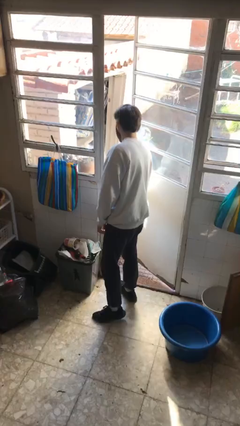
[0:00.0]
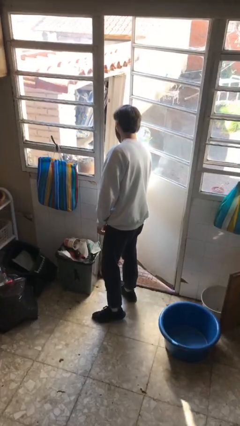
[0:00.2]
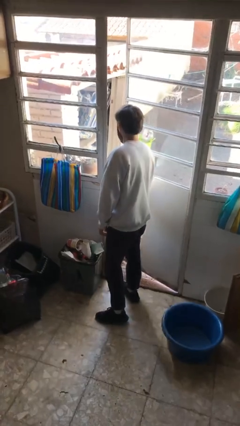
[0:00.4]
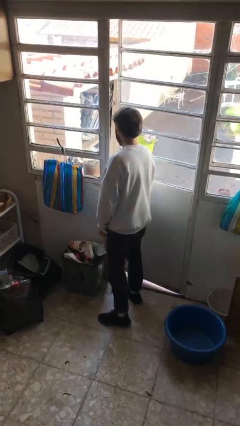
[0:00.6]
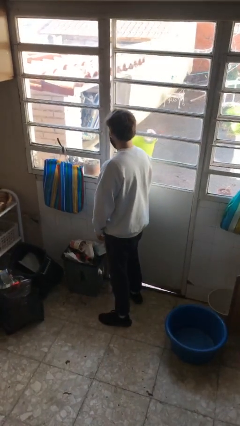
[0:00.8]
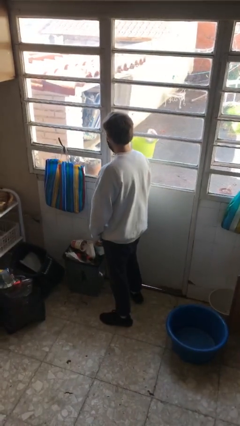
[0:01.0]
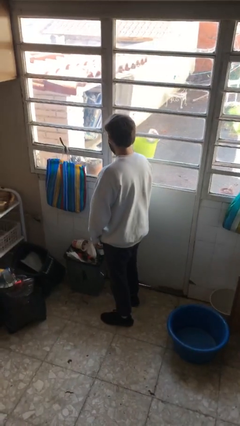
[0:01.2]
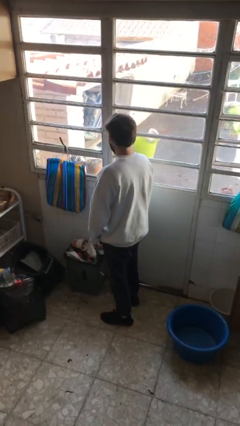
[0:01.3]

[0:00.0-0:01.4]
person closes facility door

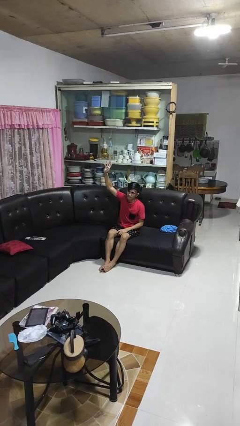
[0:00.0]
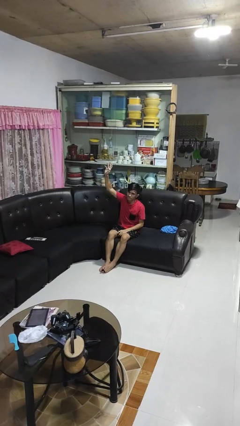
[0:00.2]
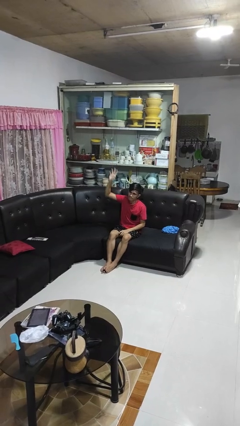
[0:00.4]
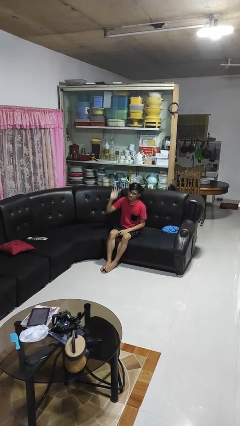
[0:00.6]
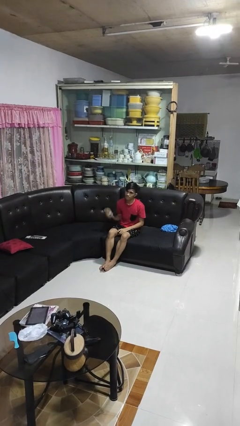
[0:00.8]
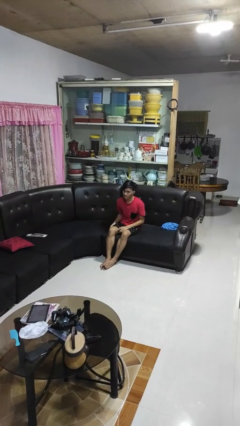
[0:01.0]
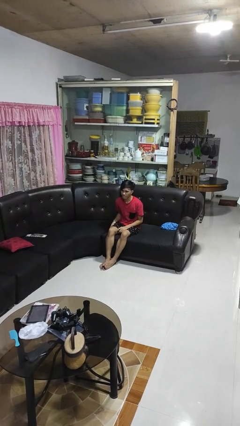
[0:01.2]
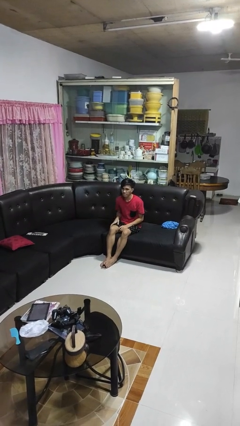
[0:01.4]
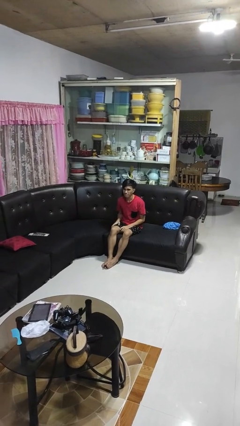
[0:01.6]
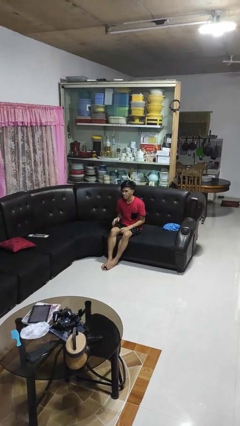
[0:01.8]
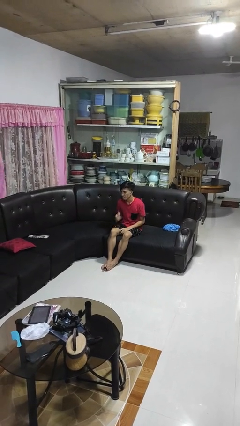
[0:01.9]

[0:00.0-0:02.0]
person gestures lower hand

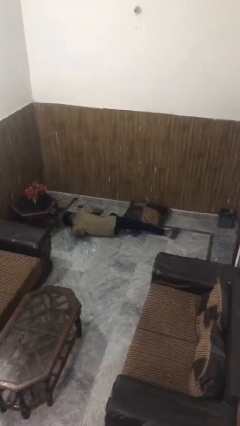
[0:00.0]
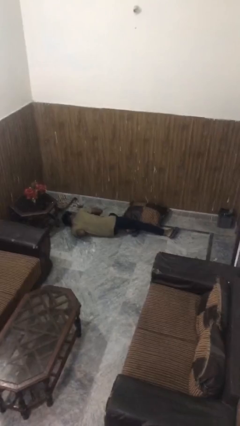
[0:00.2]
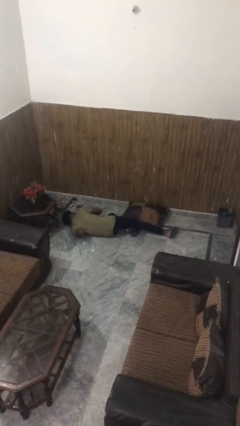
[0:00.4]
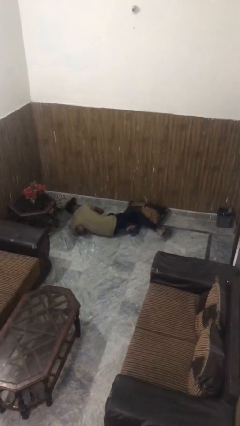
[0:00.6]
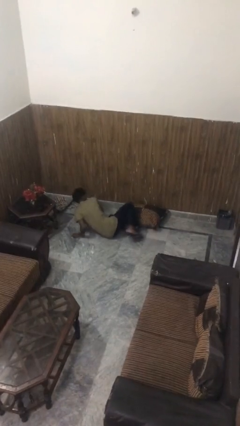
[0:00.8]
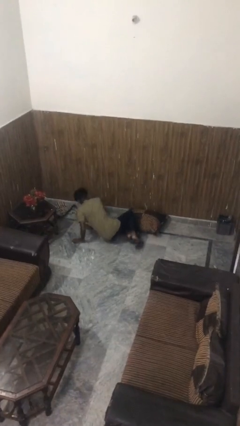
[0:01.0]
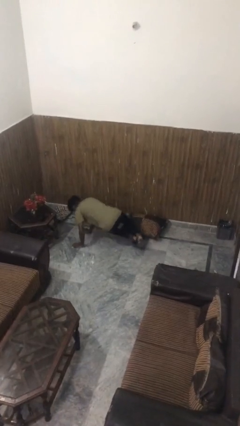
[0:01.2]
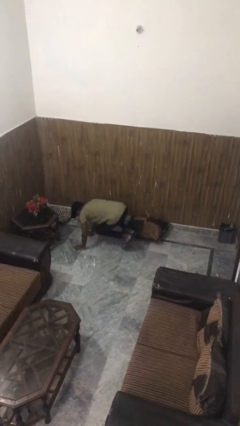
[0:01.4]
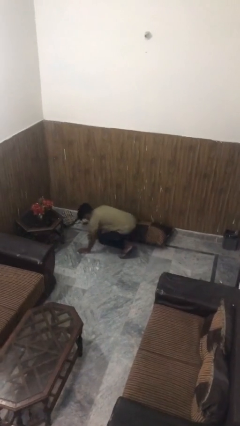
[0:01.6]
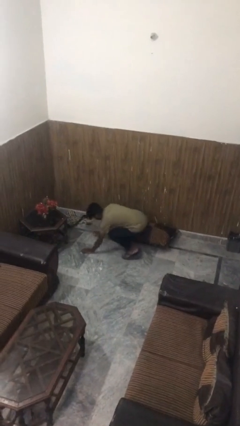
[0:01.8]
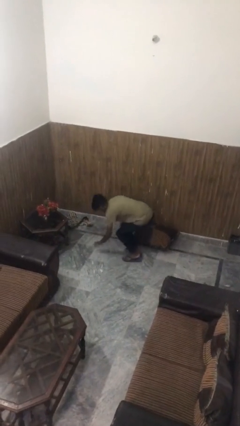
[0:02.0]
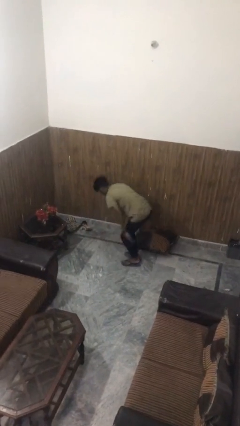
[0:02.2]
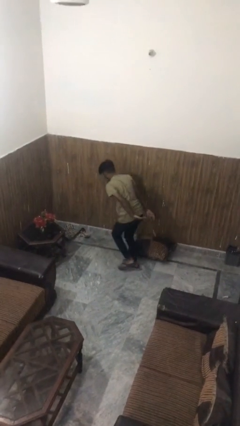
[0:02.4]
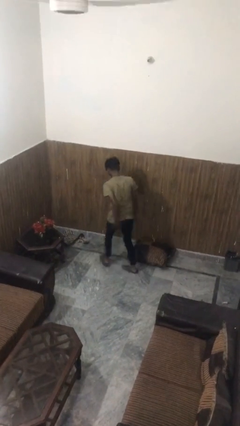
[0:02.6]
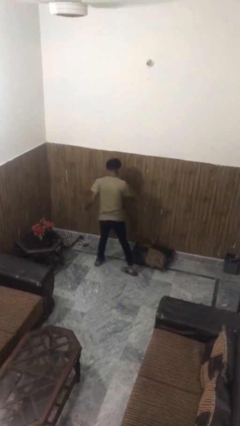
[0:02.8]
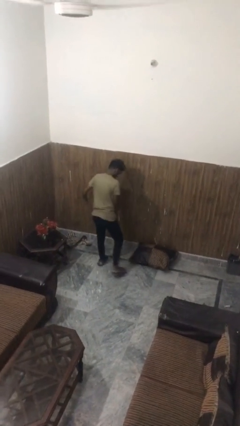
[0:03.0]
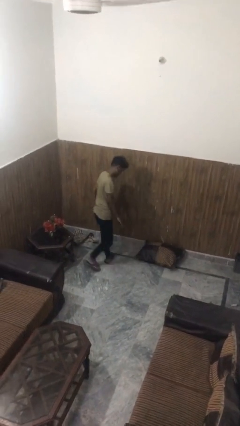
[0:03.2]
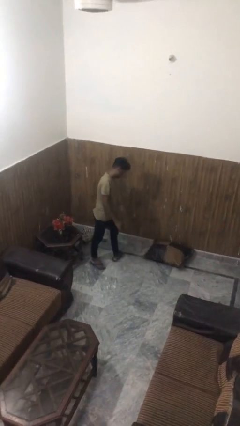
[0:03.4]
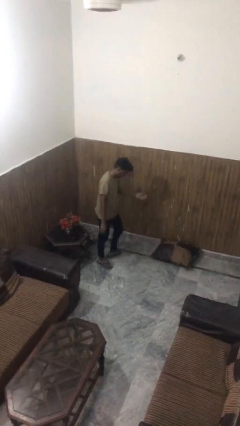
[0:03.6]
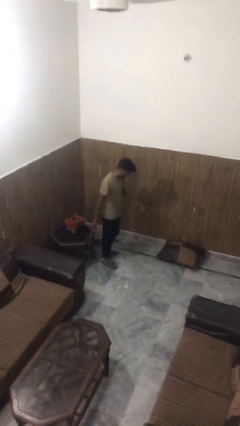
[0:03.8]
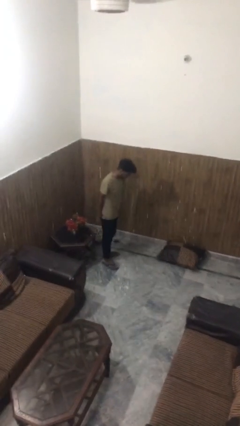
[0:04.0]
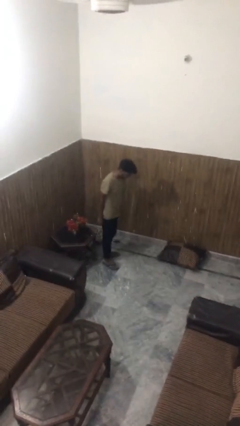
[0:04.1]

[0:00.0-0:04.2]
person stands up from floor

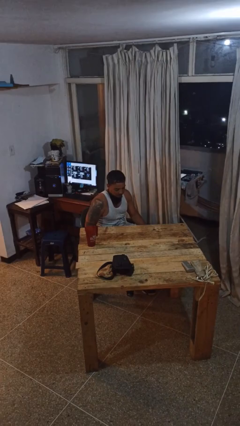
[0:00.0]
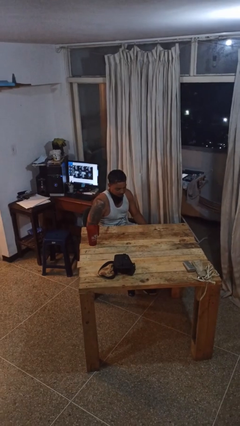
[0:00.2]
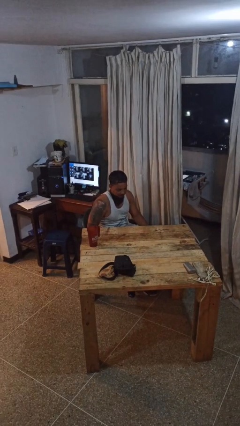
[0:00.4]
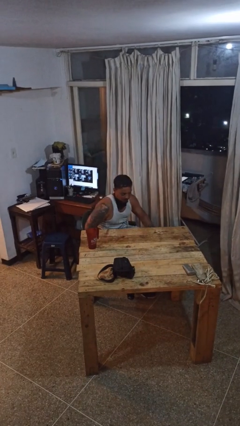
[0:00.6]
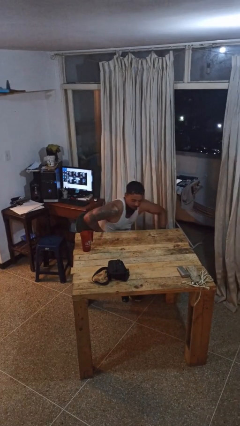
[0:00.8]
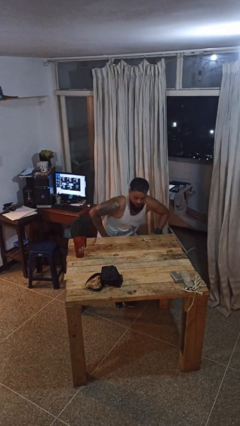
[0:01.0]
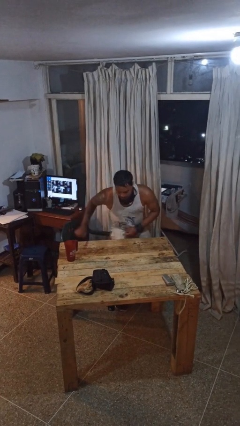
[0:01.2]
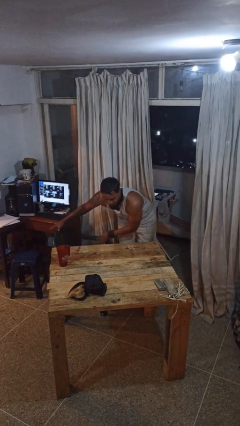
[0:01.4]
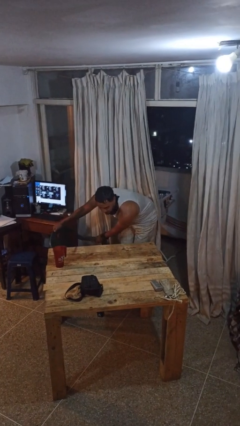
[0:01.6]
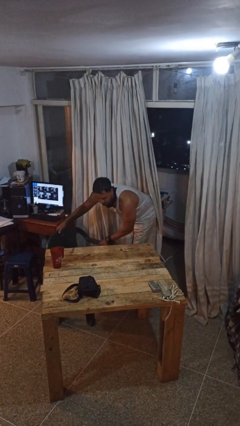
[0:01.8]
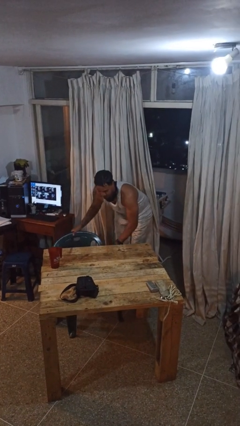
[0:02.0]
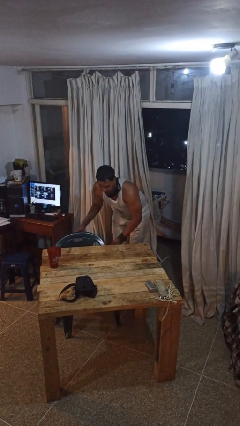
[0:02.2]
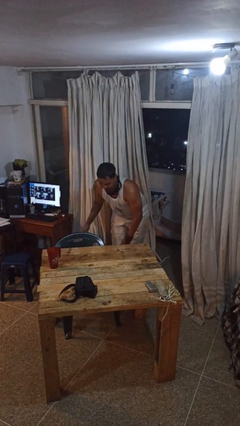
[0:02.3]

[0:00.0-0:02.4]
person stands up

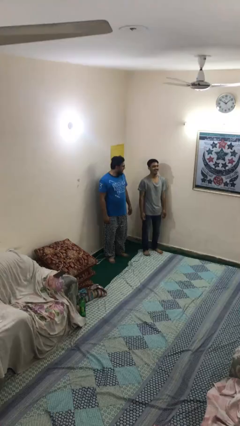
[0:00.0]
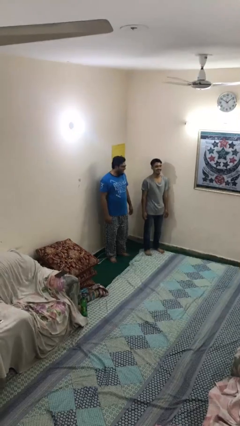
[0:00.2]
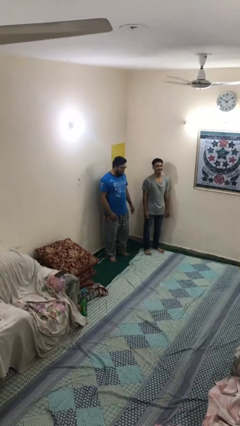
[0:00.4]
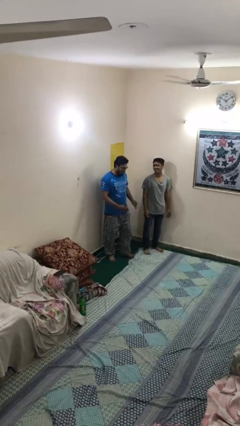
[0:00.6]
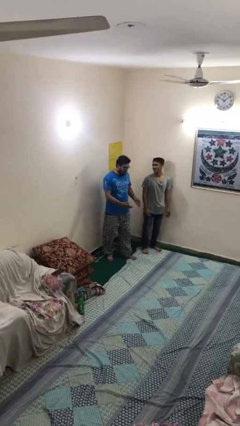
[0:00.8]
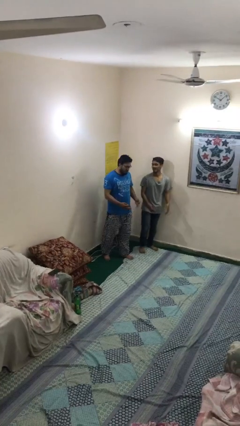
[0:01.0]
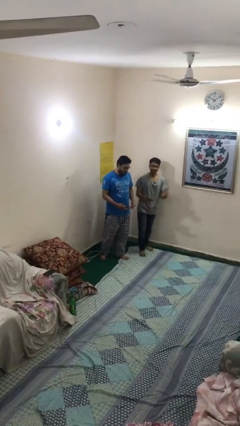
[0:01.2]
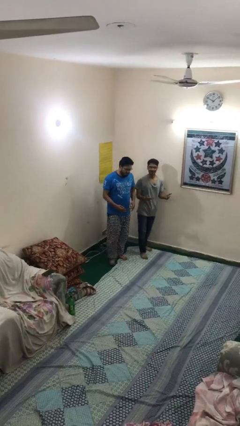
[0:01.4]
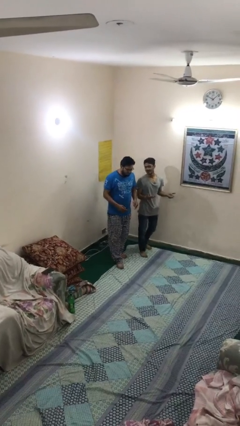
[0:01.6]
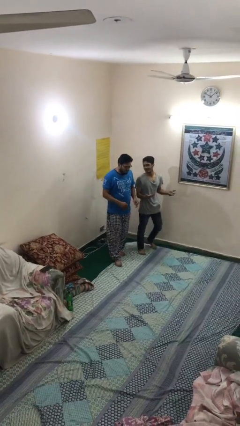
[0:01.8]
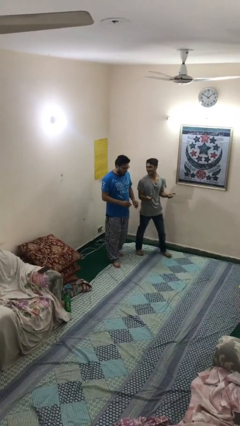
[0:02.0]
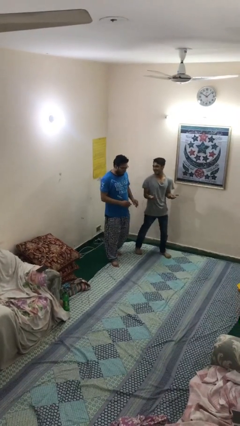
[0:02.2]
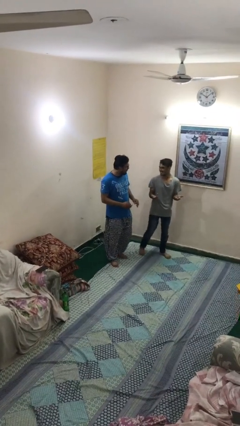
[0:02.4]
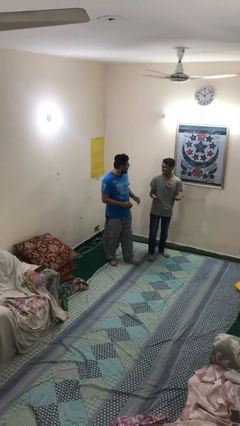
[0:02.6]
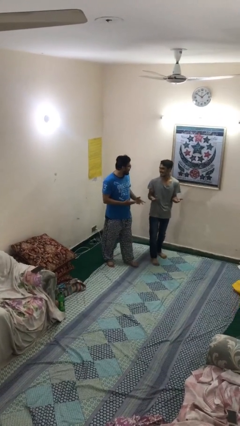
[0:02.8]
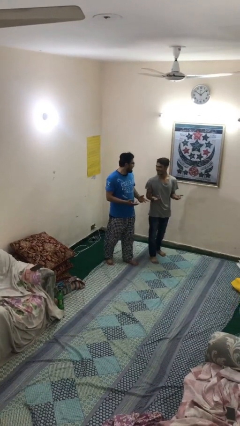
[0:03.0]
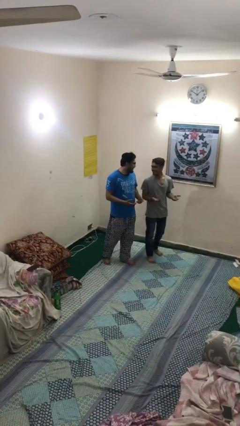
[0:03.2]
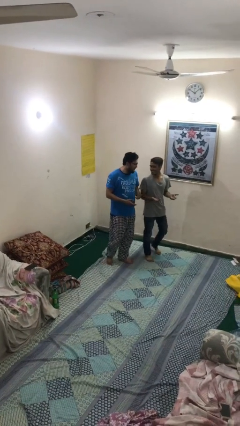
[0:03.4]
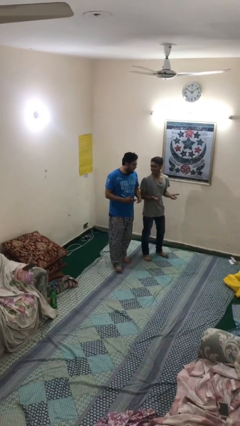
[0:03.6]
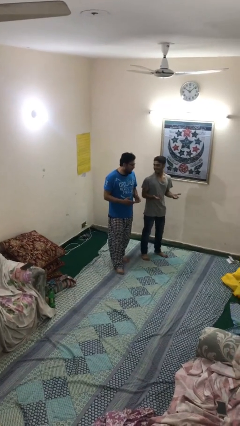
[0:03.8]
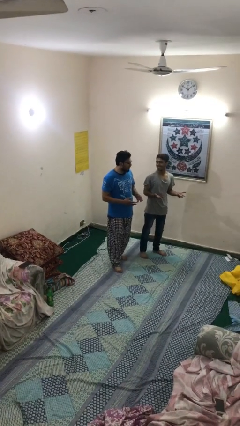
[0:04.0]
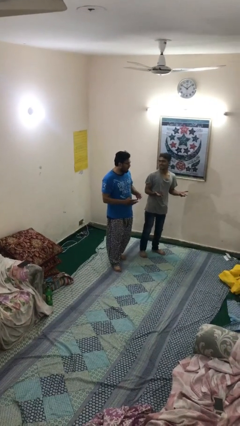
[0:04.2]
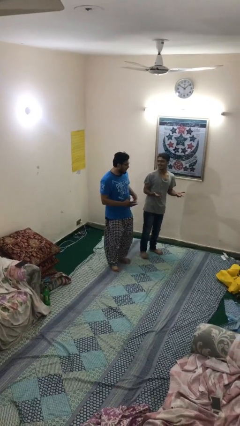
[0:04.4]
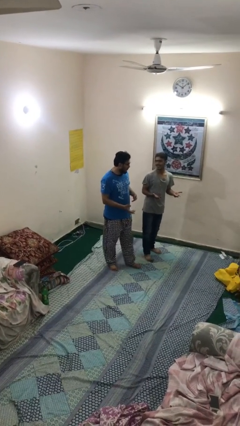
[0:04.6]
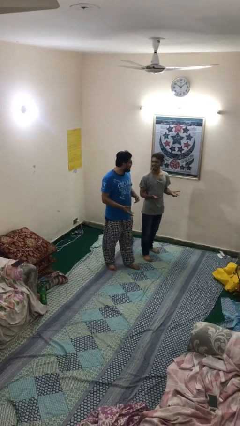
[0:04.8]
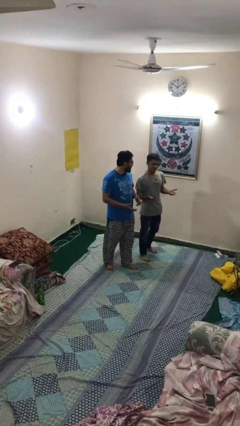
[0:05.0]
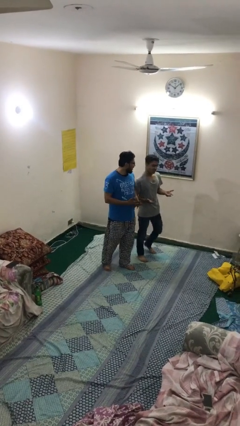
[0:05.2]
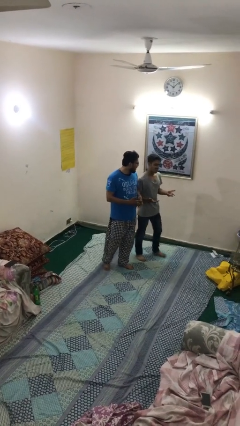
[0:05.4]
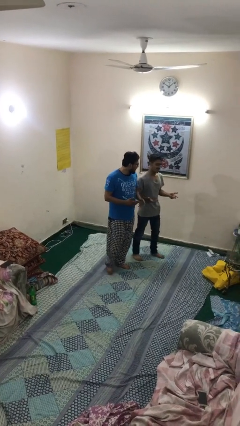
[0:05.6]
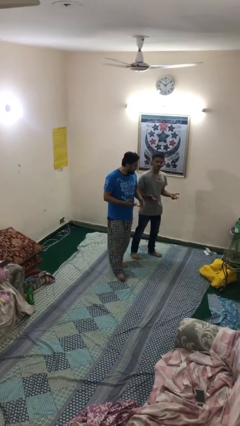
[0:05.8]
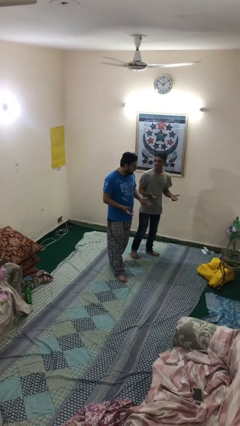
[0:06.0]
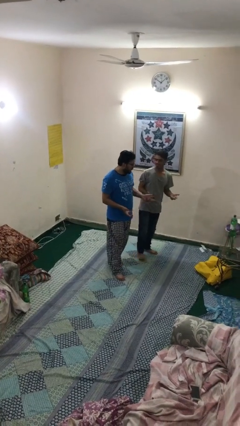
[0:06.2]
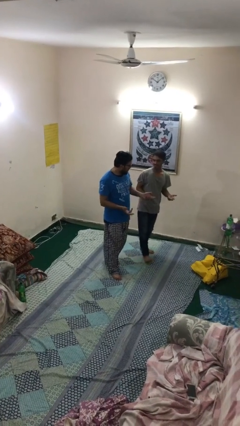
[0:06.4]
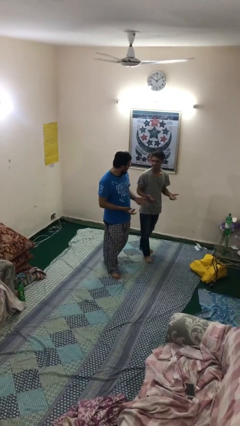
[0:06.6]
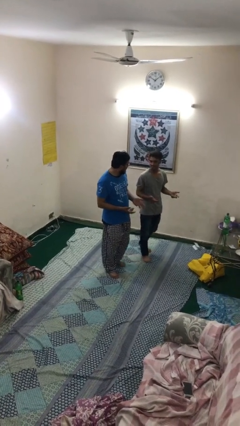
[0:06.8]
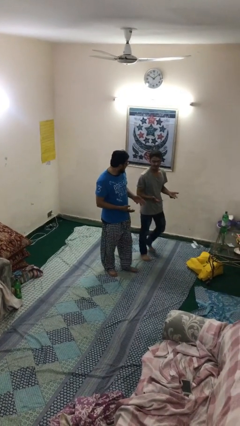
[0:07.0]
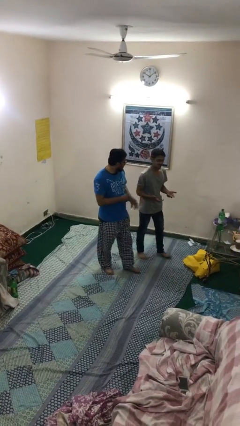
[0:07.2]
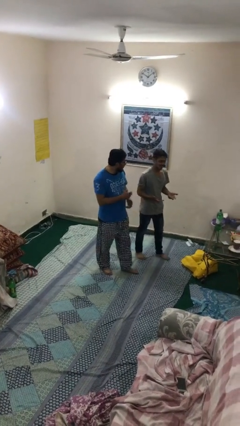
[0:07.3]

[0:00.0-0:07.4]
person talks to person
